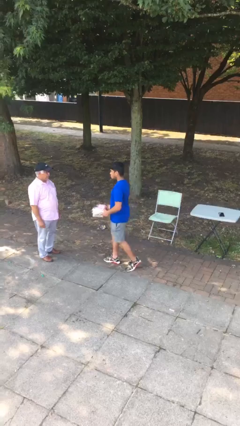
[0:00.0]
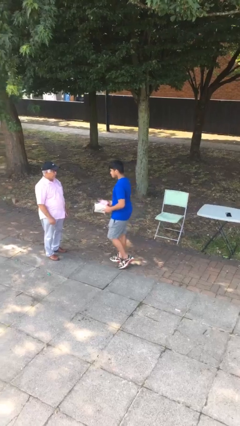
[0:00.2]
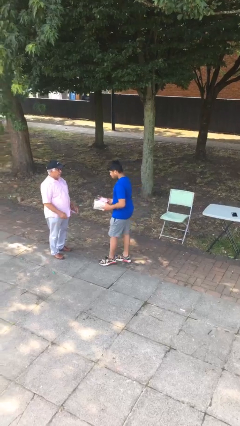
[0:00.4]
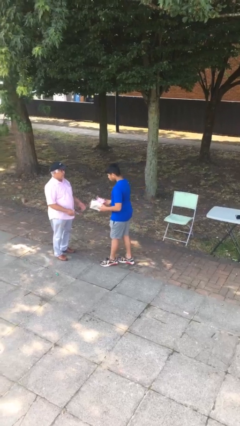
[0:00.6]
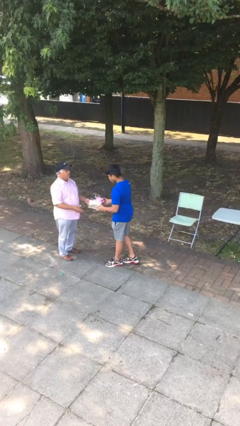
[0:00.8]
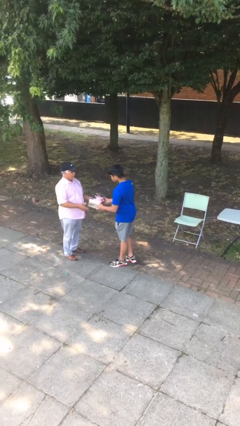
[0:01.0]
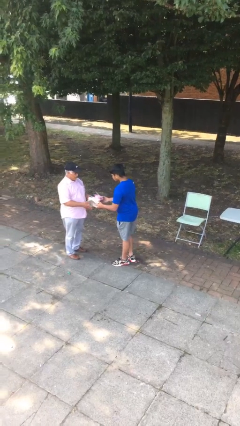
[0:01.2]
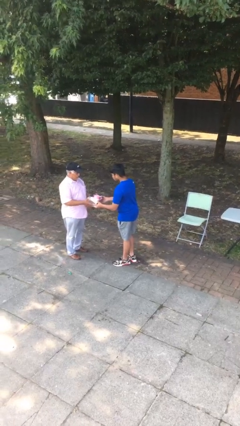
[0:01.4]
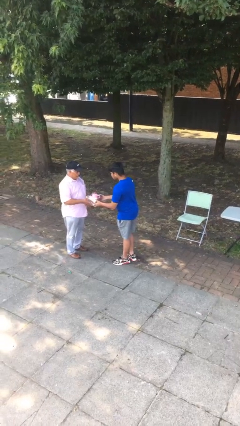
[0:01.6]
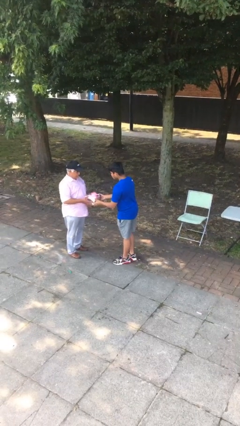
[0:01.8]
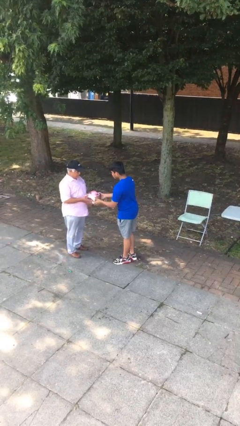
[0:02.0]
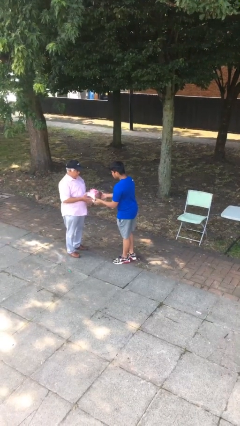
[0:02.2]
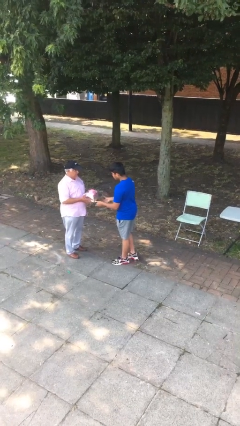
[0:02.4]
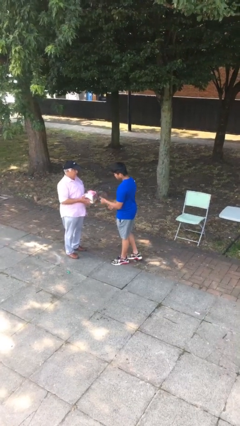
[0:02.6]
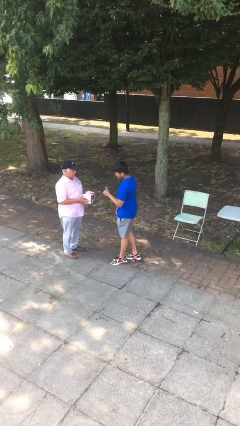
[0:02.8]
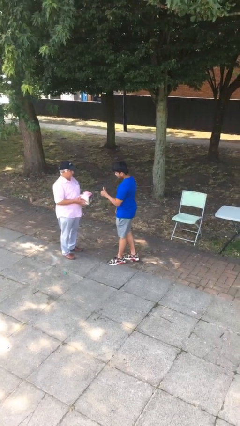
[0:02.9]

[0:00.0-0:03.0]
person transfers object to person

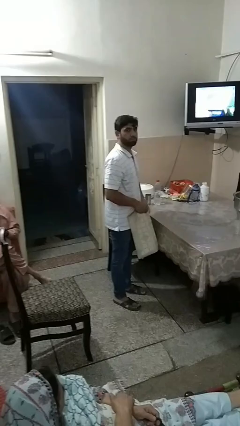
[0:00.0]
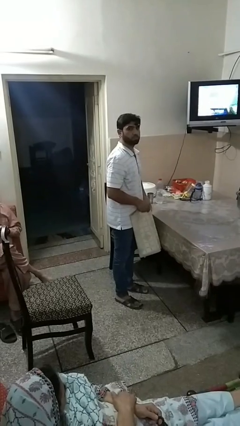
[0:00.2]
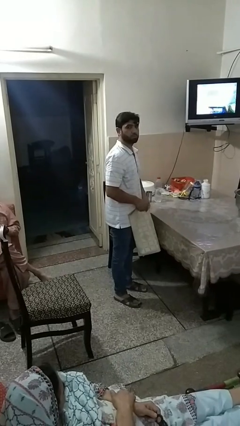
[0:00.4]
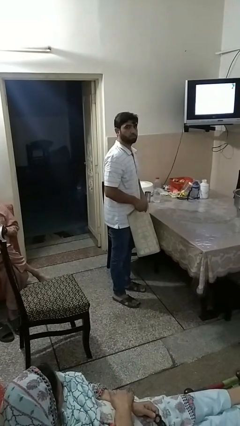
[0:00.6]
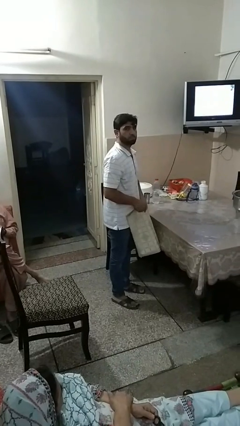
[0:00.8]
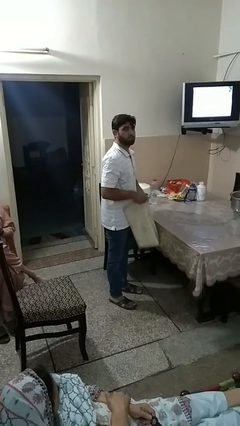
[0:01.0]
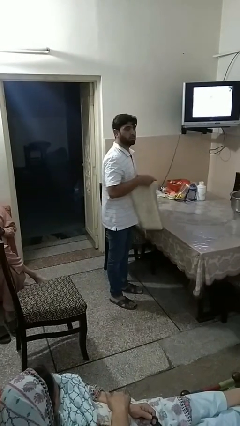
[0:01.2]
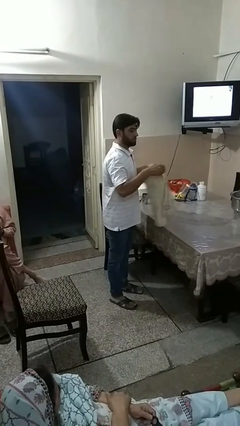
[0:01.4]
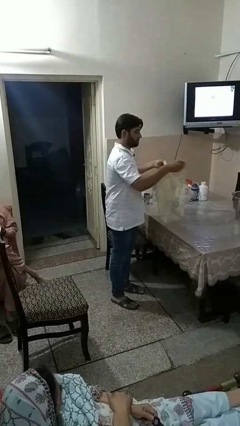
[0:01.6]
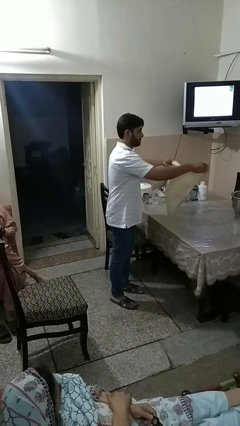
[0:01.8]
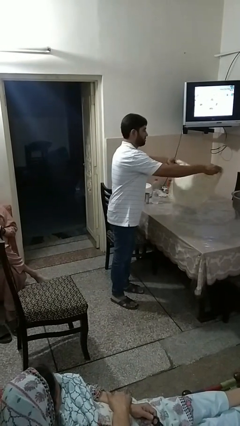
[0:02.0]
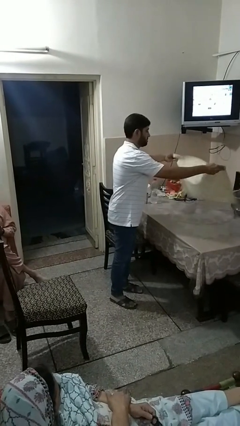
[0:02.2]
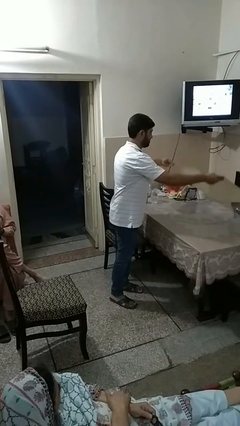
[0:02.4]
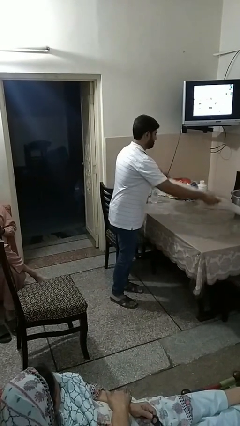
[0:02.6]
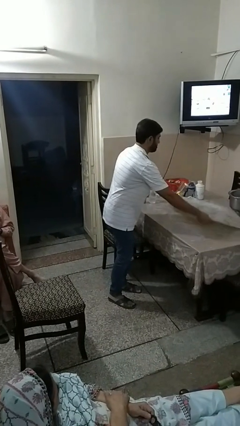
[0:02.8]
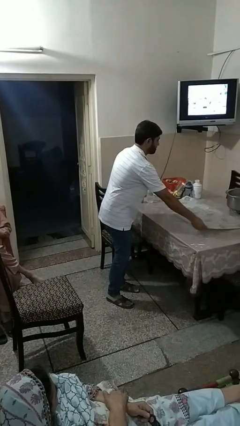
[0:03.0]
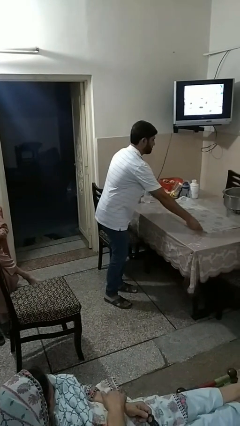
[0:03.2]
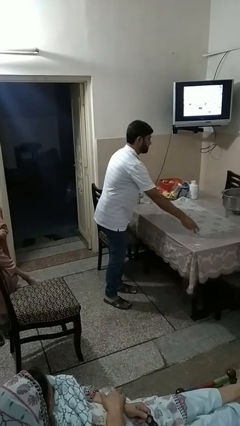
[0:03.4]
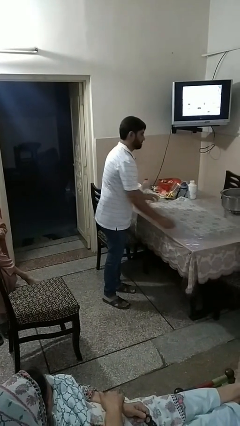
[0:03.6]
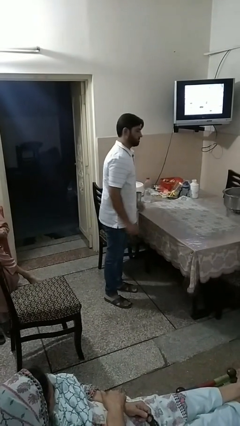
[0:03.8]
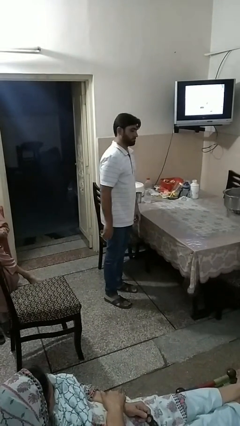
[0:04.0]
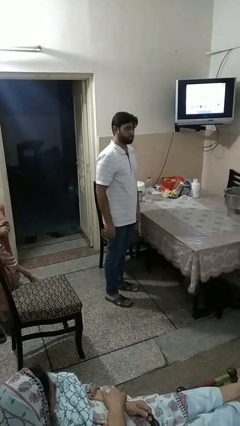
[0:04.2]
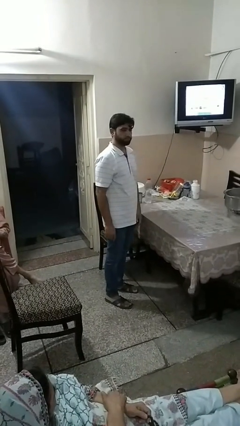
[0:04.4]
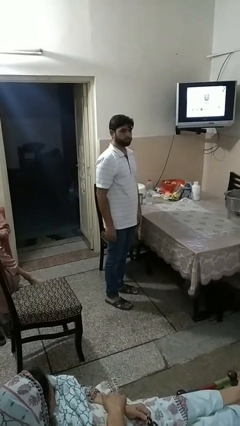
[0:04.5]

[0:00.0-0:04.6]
person spreads tablecloth

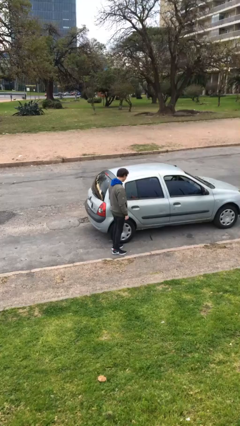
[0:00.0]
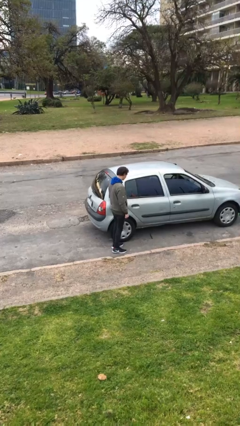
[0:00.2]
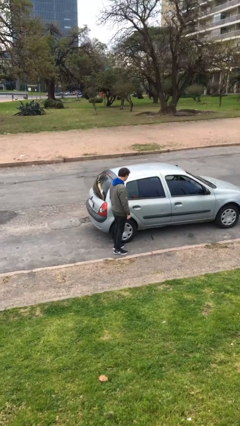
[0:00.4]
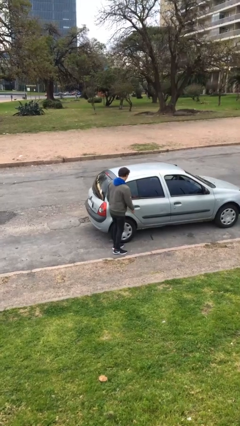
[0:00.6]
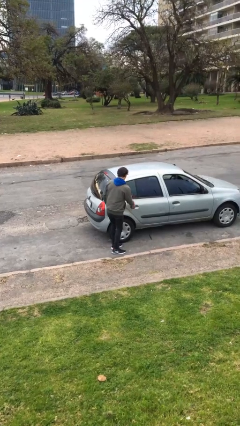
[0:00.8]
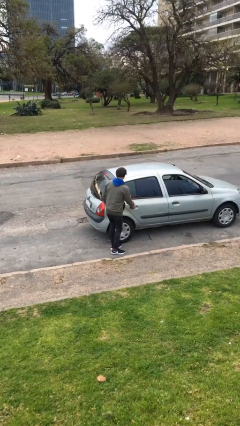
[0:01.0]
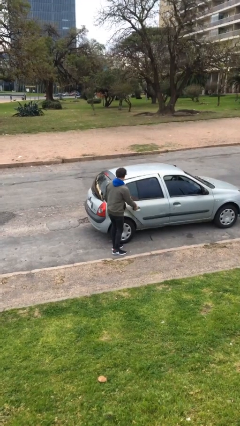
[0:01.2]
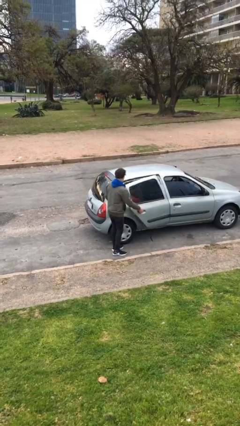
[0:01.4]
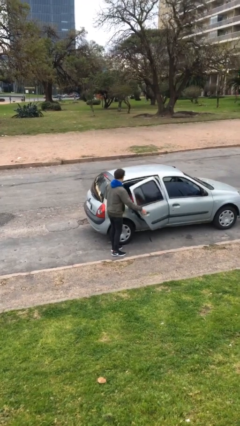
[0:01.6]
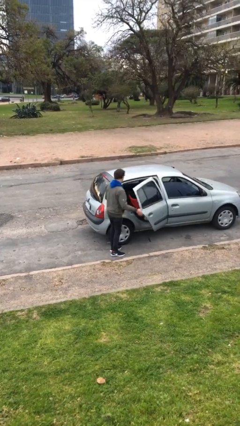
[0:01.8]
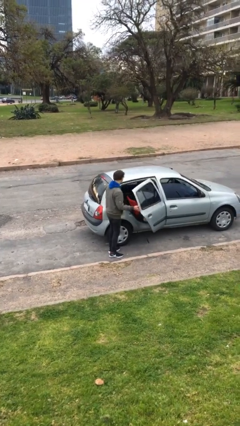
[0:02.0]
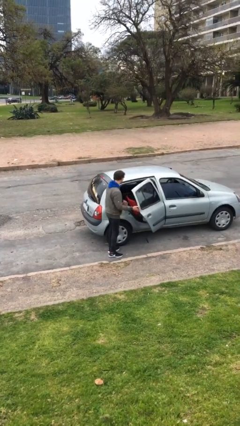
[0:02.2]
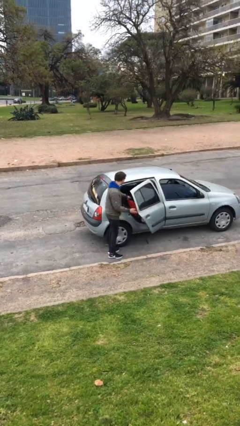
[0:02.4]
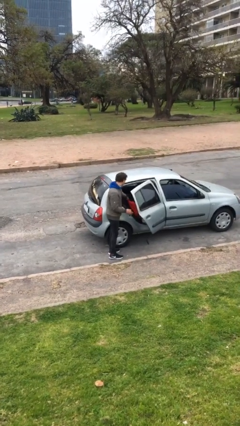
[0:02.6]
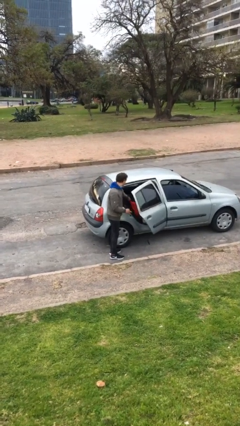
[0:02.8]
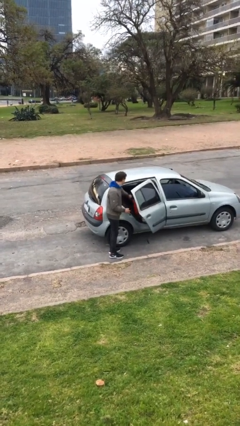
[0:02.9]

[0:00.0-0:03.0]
person opens car door

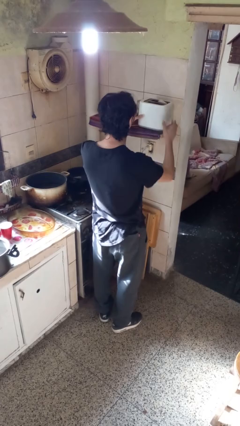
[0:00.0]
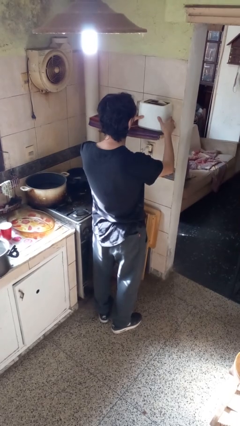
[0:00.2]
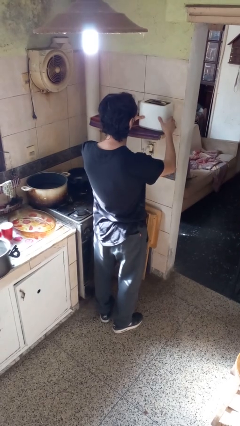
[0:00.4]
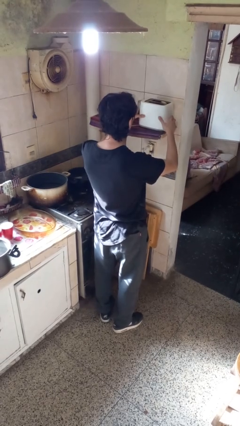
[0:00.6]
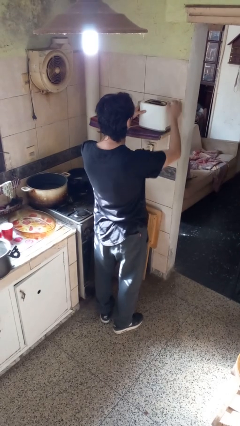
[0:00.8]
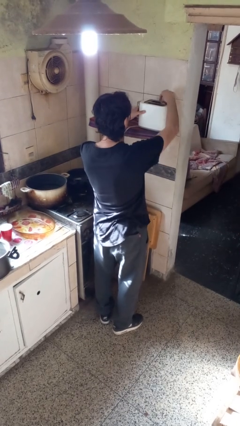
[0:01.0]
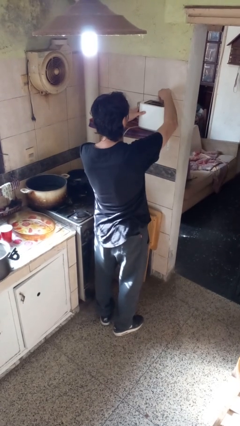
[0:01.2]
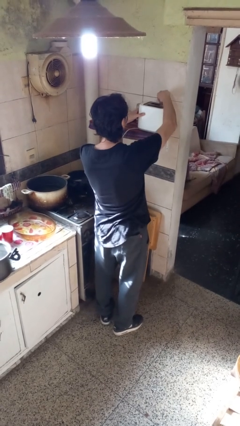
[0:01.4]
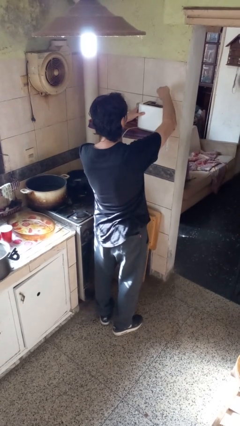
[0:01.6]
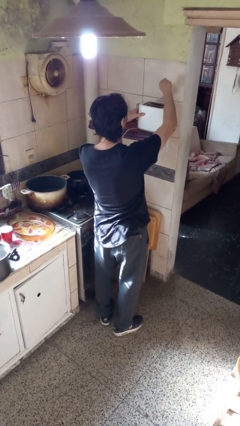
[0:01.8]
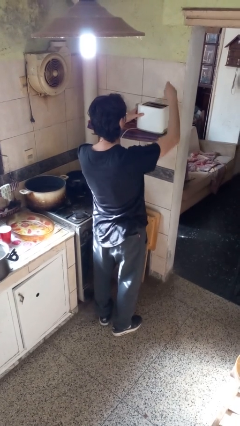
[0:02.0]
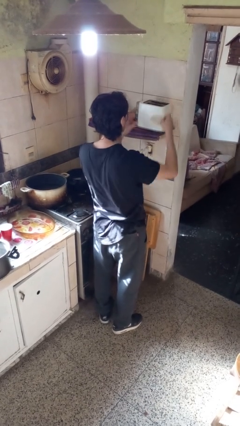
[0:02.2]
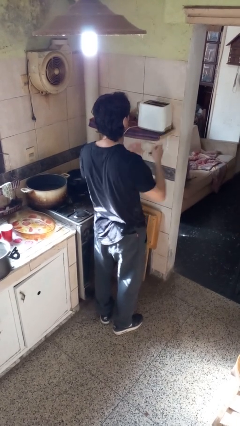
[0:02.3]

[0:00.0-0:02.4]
person takes object from toaster

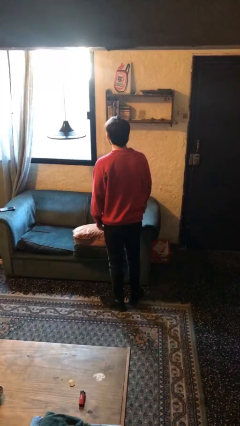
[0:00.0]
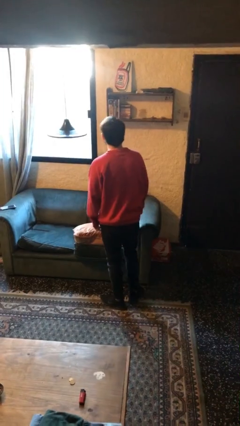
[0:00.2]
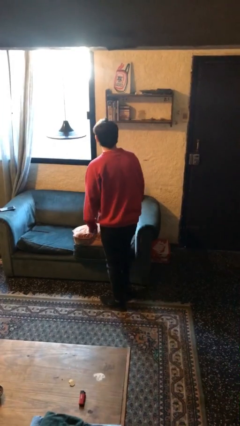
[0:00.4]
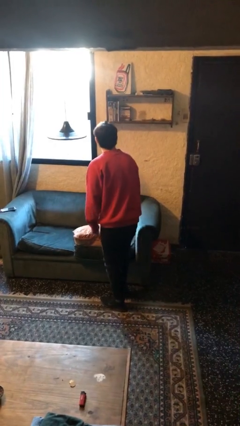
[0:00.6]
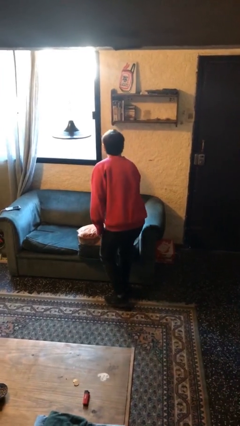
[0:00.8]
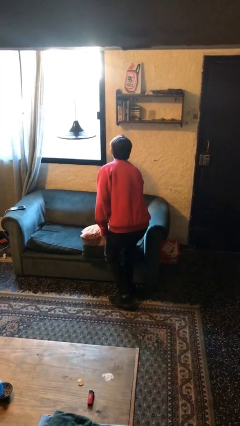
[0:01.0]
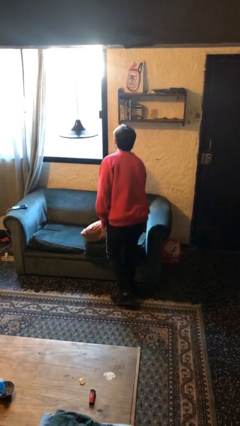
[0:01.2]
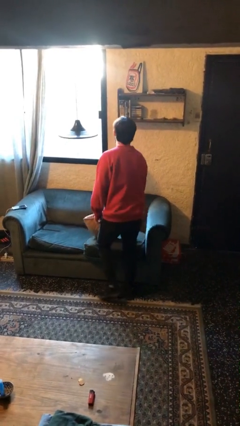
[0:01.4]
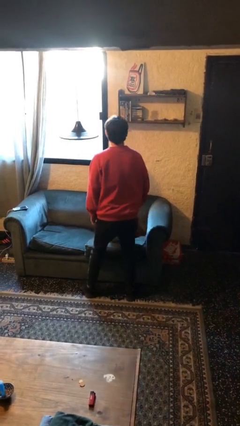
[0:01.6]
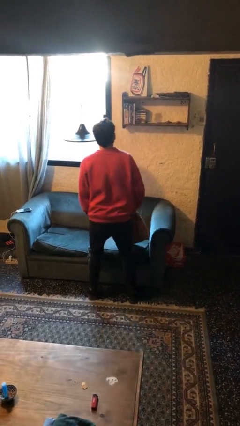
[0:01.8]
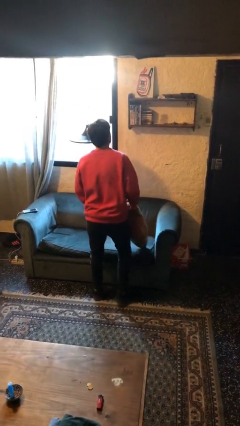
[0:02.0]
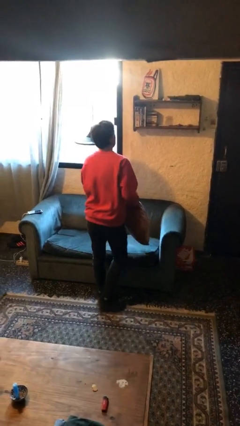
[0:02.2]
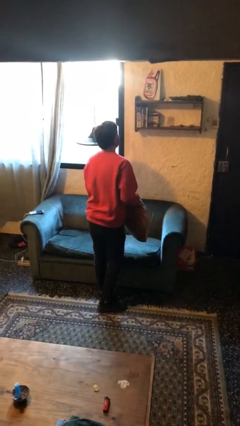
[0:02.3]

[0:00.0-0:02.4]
person picks up object from couch

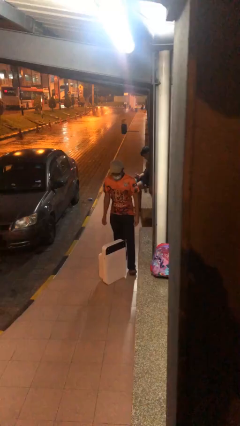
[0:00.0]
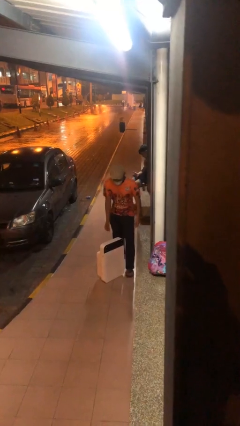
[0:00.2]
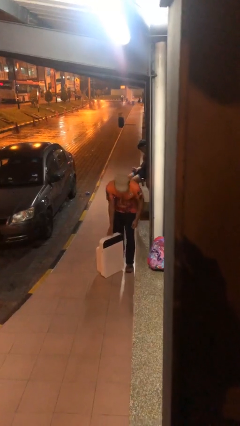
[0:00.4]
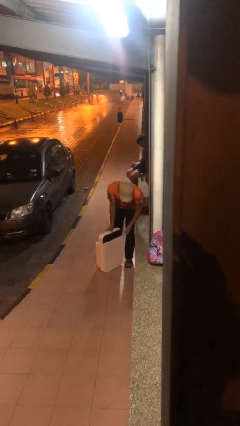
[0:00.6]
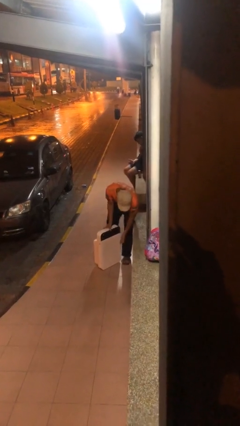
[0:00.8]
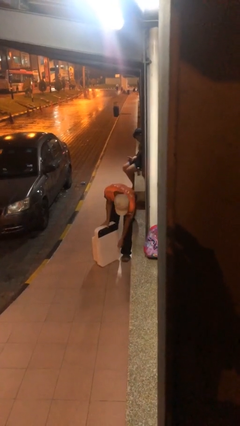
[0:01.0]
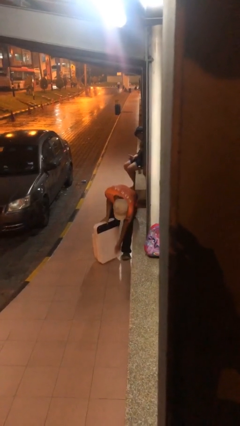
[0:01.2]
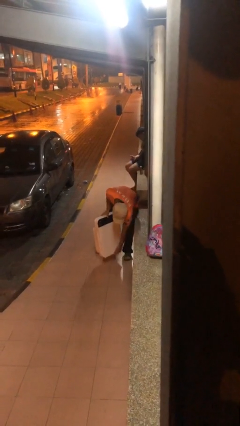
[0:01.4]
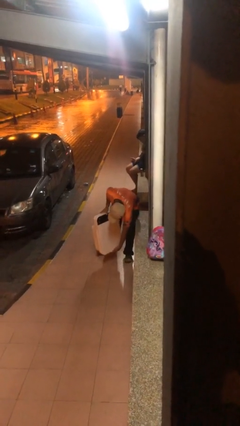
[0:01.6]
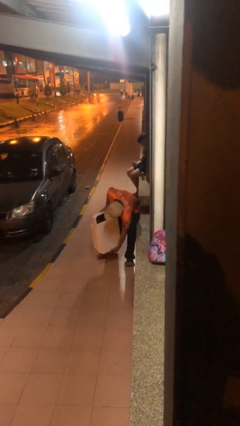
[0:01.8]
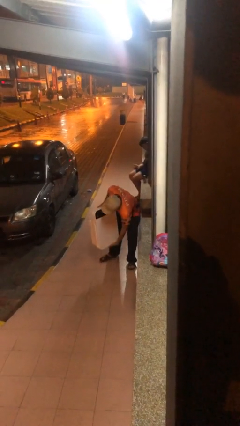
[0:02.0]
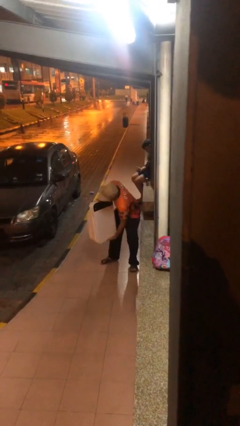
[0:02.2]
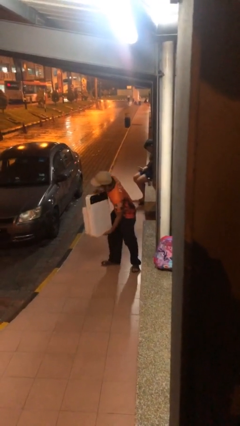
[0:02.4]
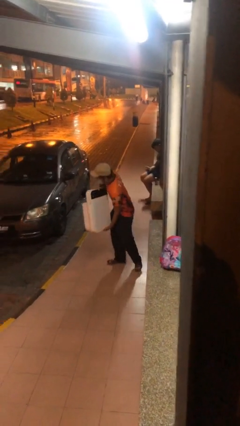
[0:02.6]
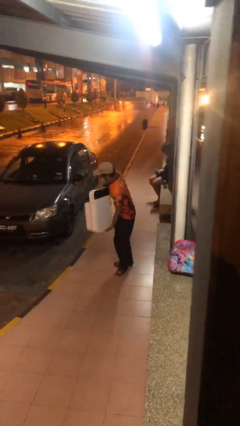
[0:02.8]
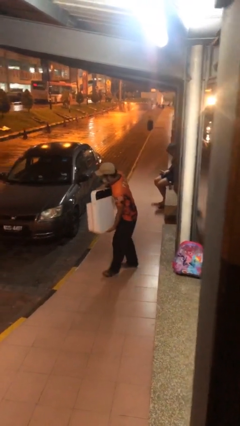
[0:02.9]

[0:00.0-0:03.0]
person picks up object from floor
